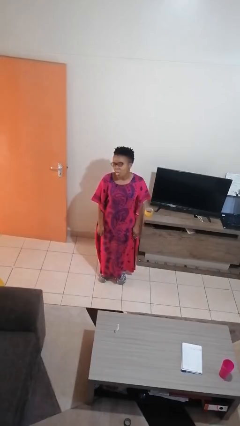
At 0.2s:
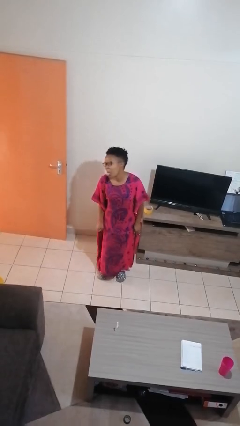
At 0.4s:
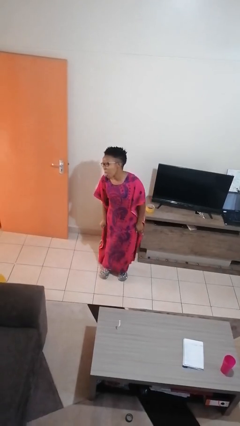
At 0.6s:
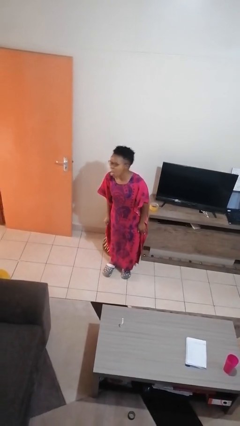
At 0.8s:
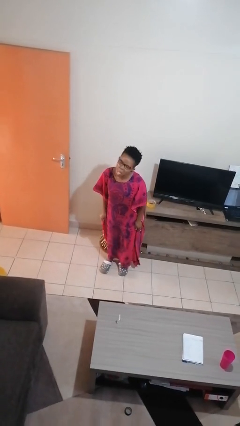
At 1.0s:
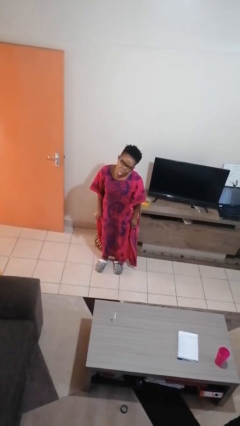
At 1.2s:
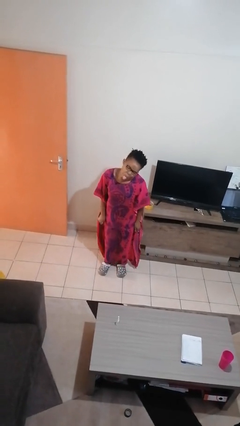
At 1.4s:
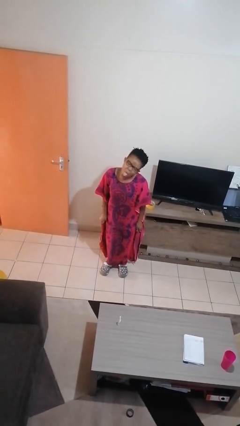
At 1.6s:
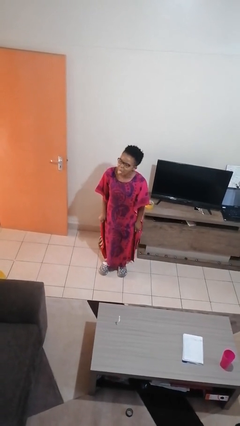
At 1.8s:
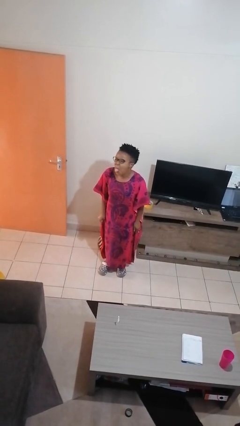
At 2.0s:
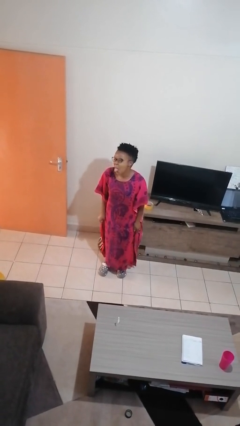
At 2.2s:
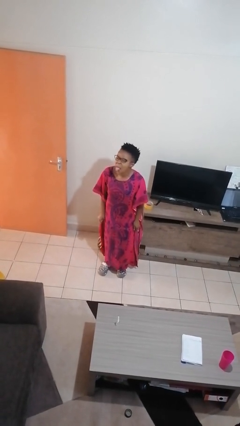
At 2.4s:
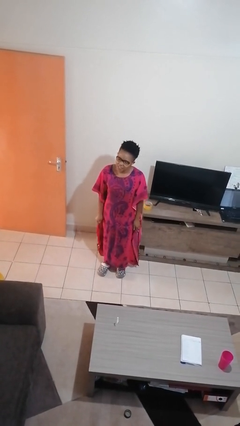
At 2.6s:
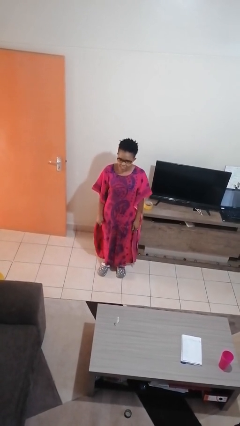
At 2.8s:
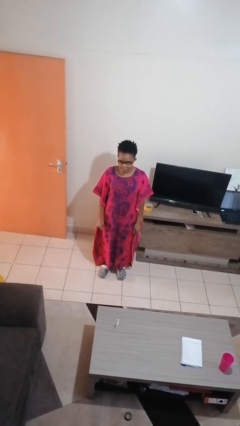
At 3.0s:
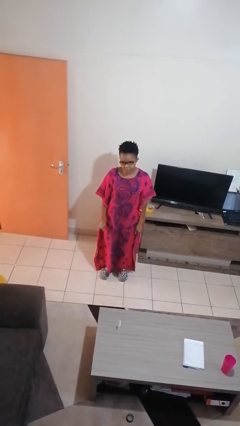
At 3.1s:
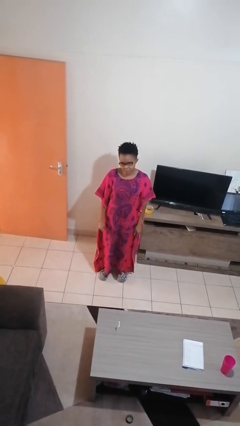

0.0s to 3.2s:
person sticks out tongue

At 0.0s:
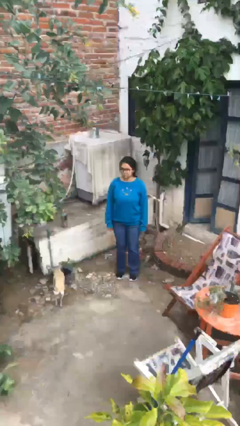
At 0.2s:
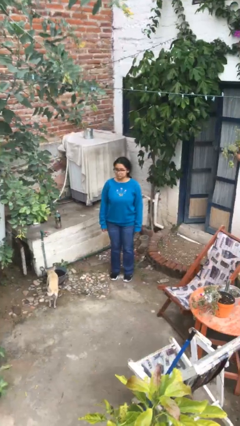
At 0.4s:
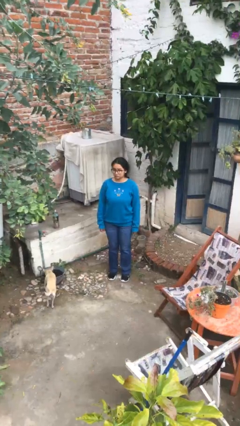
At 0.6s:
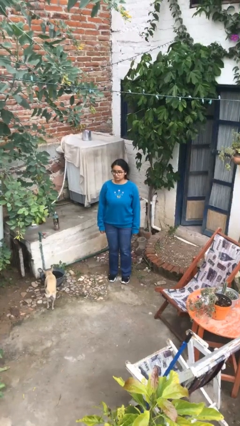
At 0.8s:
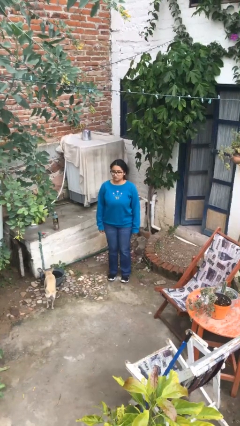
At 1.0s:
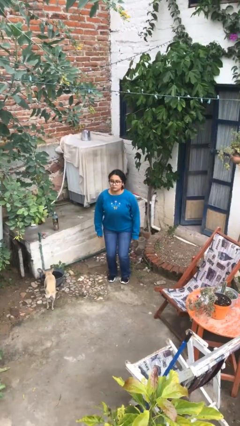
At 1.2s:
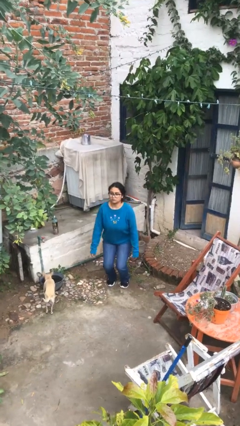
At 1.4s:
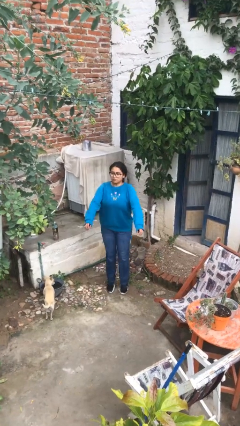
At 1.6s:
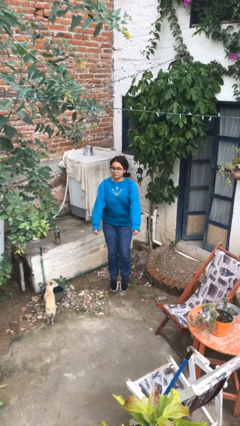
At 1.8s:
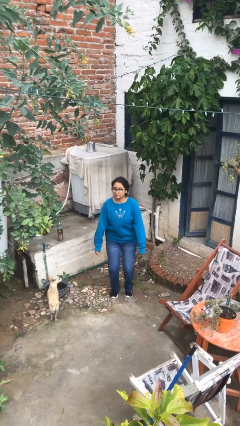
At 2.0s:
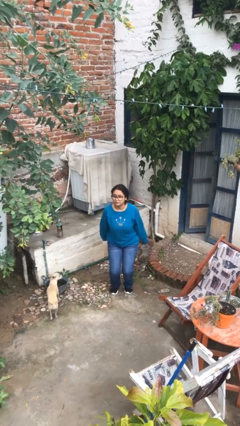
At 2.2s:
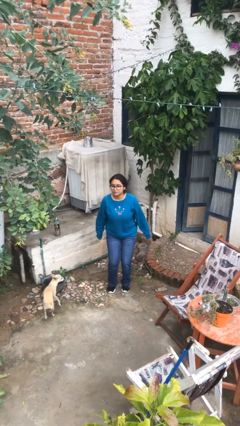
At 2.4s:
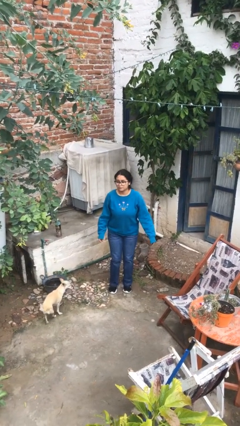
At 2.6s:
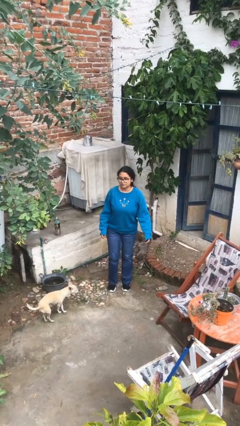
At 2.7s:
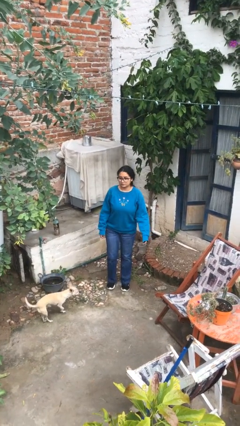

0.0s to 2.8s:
person jumps

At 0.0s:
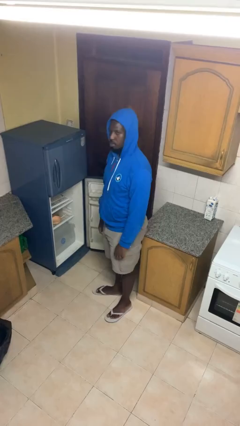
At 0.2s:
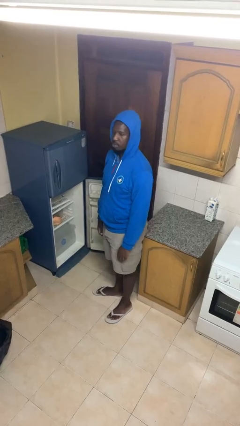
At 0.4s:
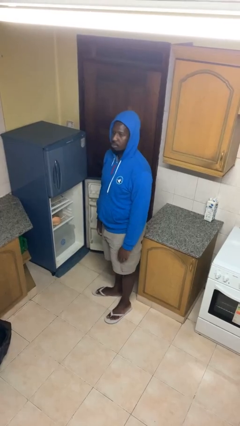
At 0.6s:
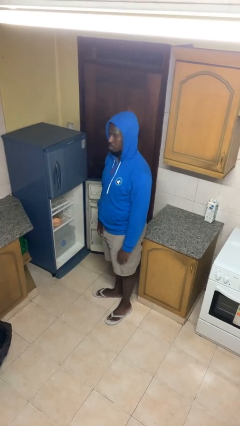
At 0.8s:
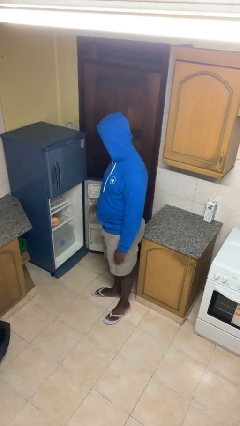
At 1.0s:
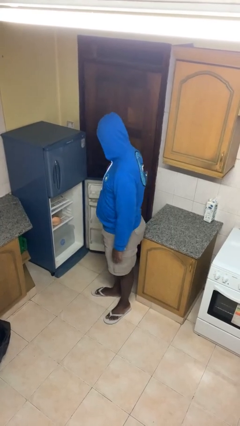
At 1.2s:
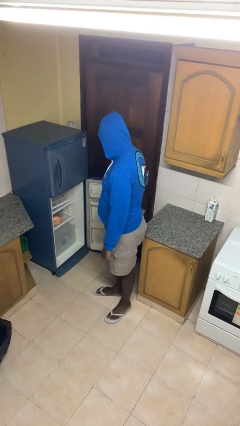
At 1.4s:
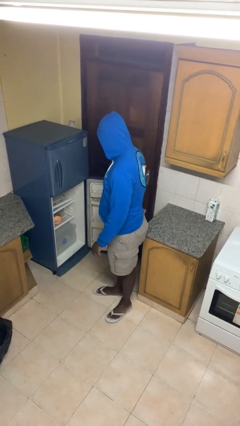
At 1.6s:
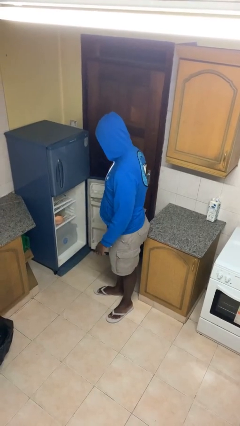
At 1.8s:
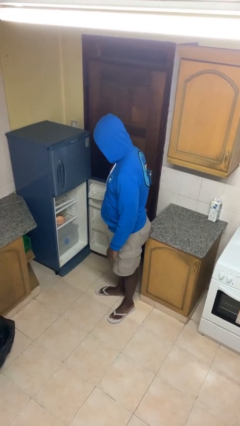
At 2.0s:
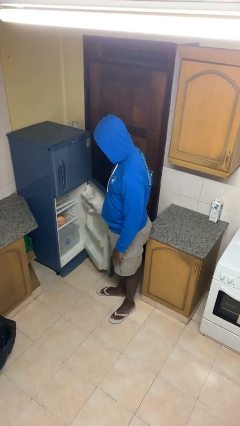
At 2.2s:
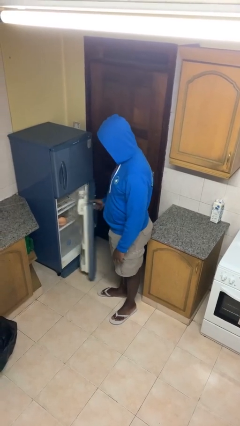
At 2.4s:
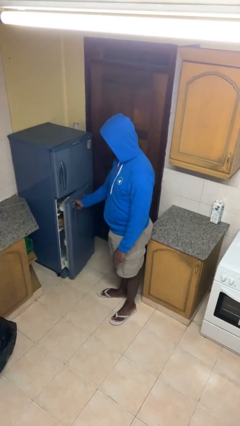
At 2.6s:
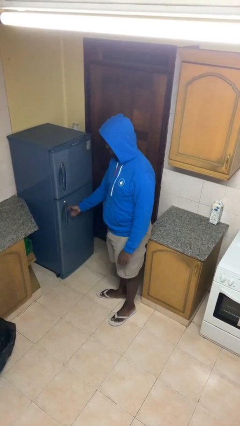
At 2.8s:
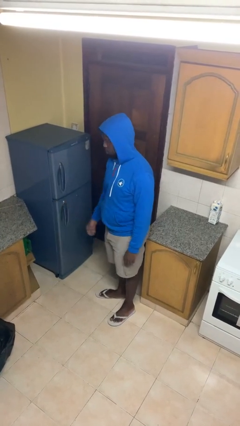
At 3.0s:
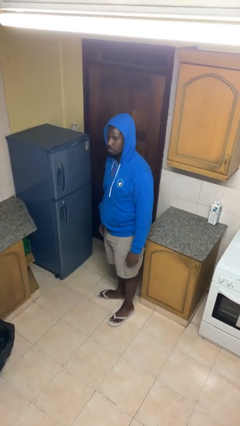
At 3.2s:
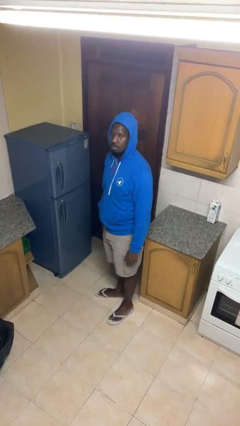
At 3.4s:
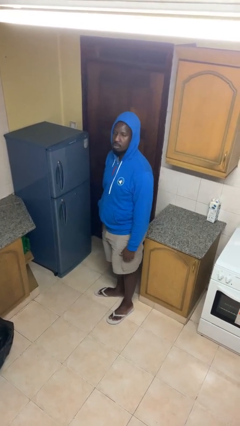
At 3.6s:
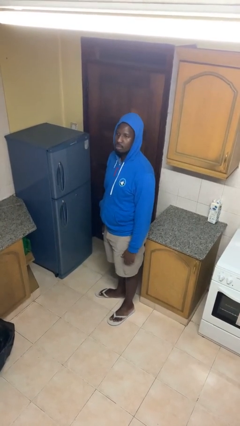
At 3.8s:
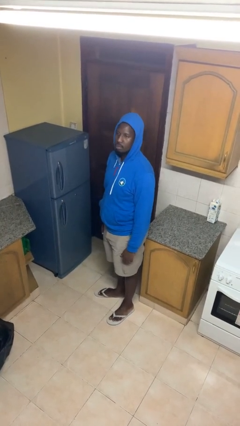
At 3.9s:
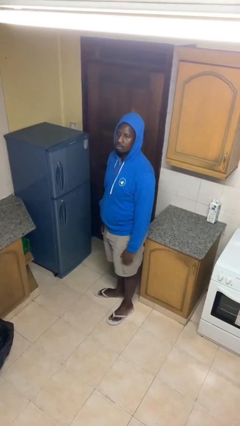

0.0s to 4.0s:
person closes refrigerator

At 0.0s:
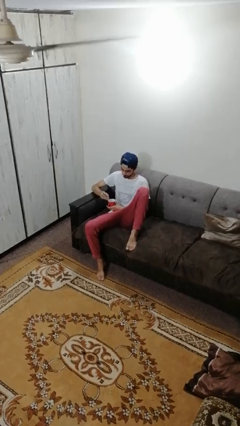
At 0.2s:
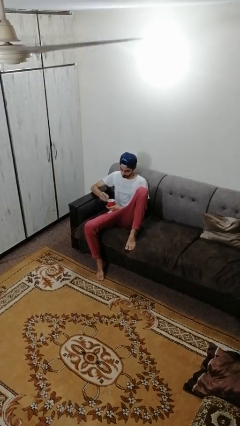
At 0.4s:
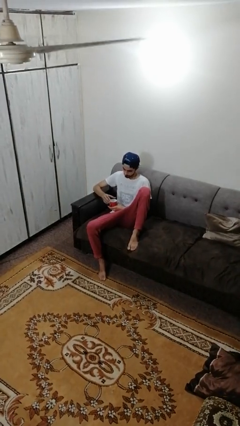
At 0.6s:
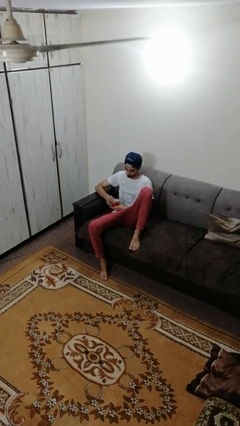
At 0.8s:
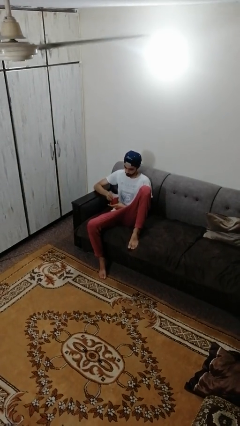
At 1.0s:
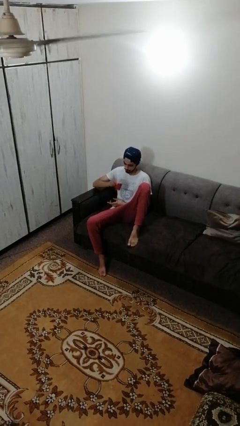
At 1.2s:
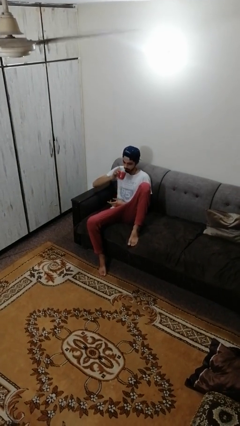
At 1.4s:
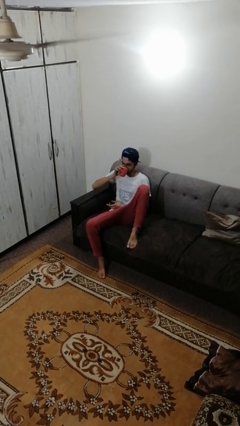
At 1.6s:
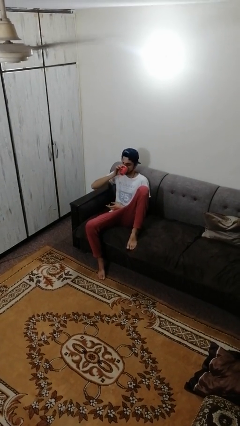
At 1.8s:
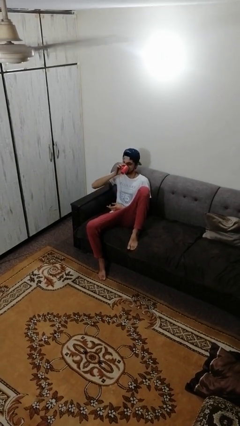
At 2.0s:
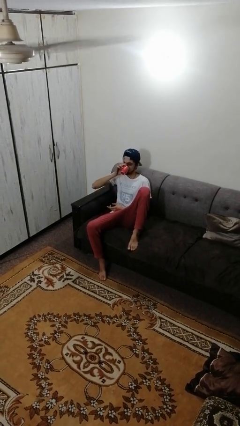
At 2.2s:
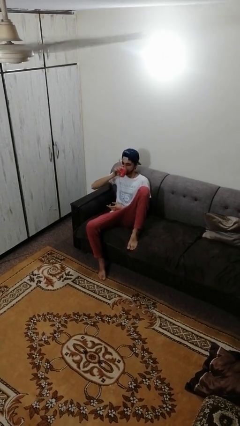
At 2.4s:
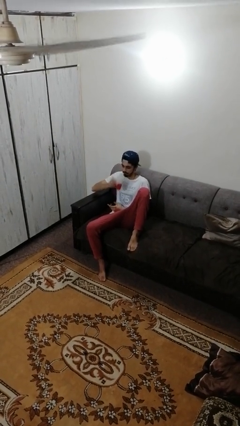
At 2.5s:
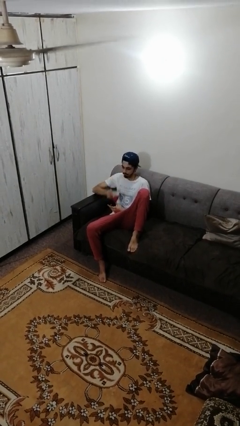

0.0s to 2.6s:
person drinks from mug

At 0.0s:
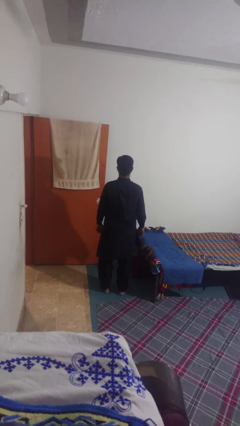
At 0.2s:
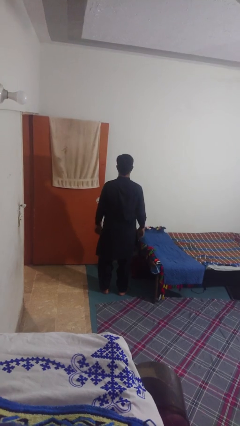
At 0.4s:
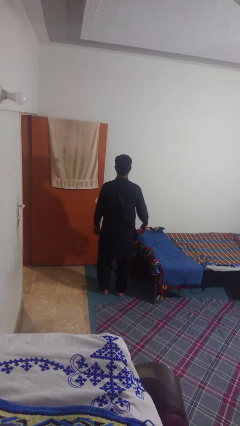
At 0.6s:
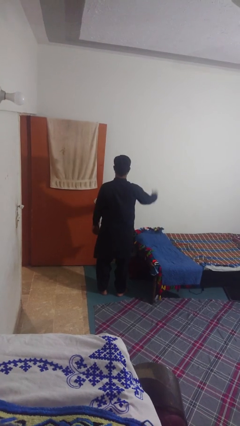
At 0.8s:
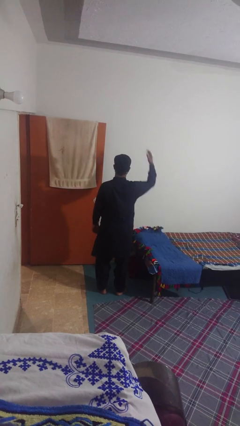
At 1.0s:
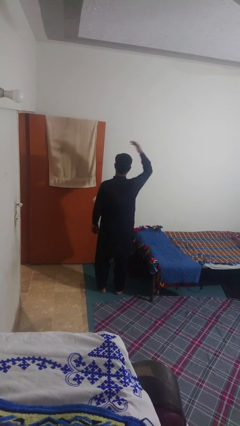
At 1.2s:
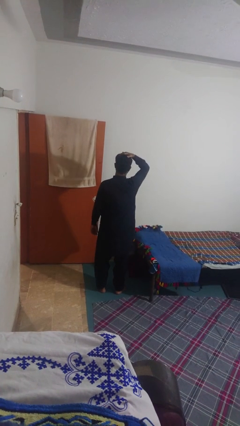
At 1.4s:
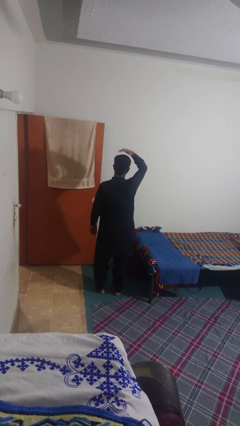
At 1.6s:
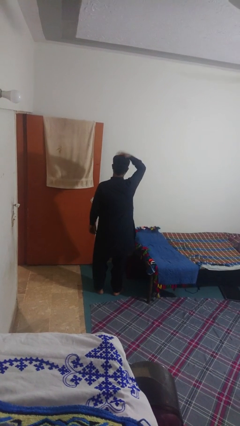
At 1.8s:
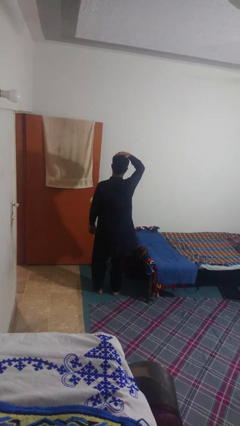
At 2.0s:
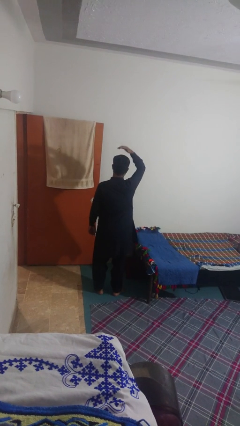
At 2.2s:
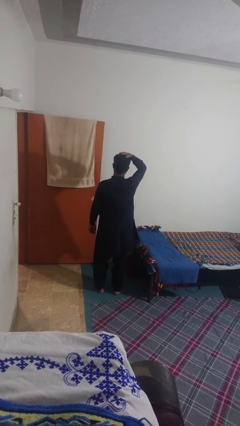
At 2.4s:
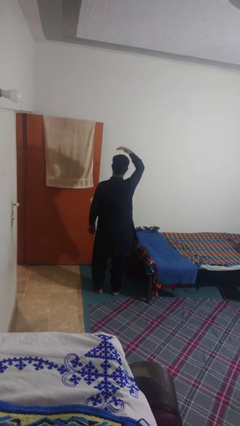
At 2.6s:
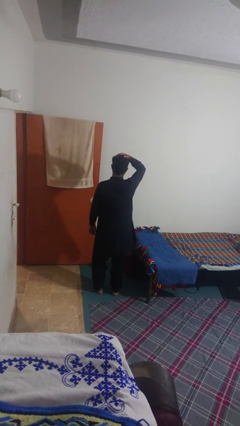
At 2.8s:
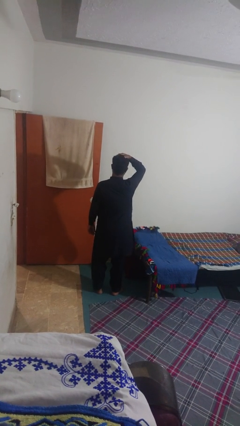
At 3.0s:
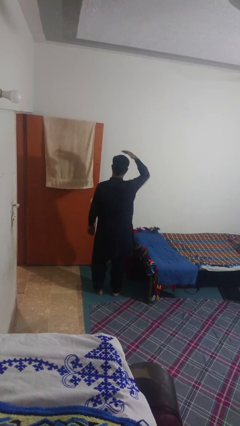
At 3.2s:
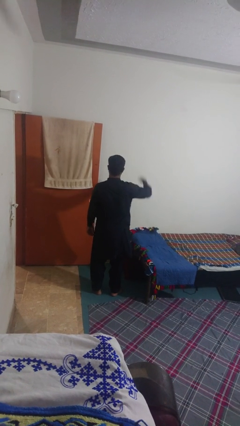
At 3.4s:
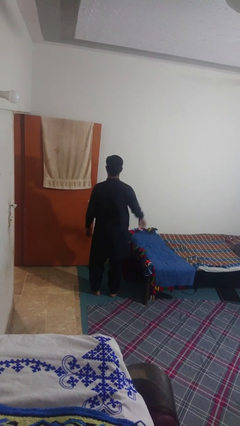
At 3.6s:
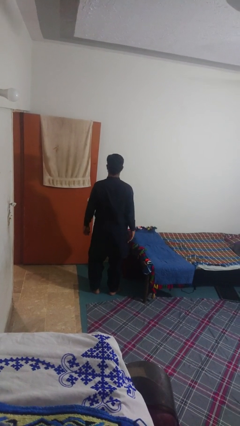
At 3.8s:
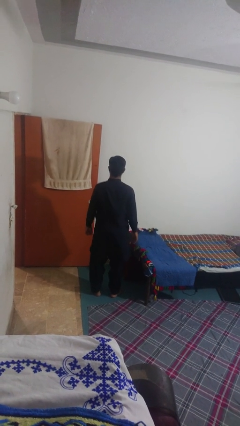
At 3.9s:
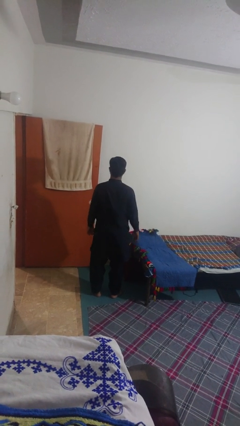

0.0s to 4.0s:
person pats head

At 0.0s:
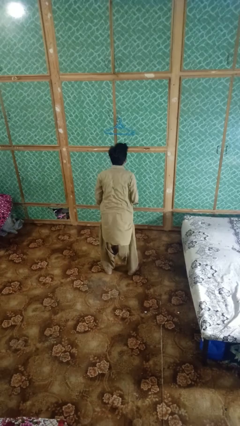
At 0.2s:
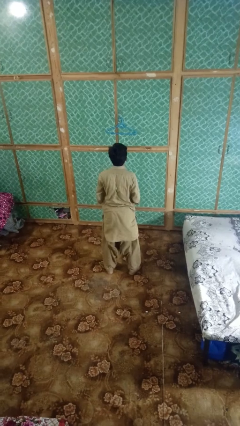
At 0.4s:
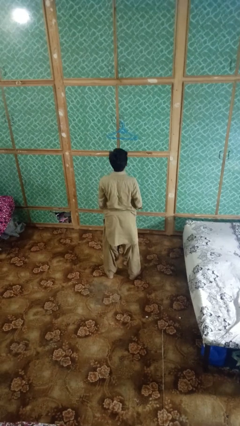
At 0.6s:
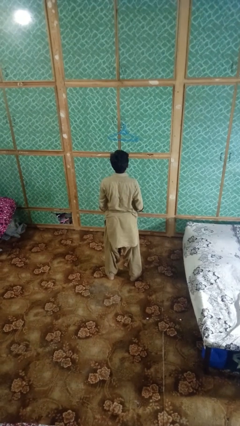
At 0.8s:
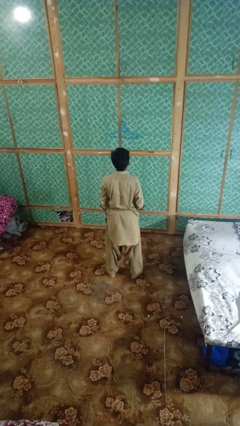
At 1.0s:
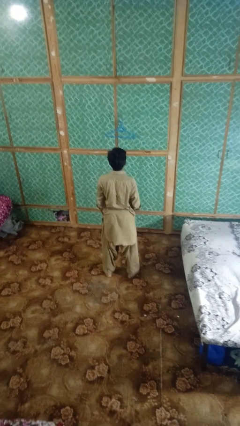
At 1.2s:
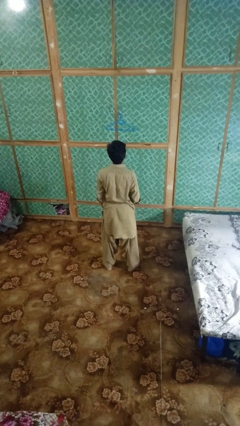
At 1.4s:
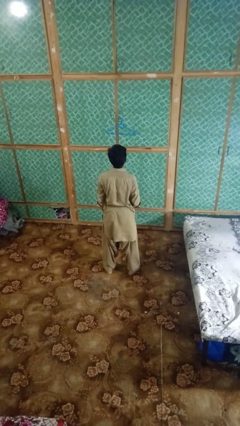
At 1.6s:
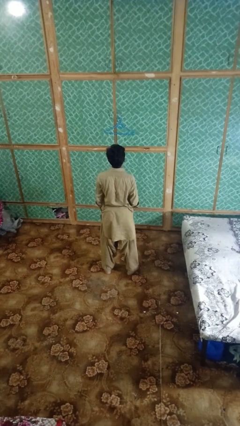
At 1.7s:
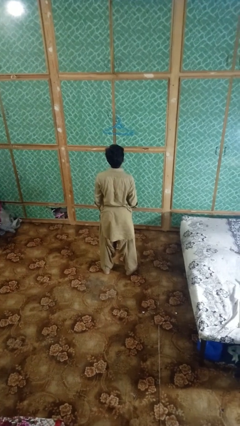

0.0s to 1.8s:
person picks up object from floor
